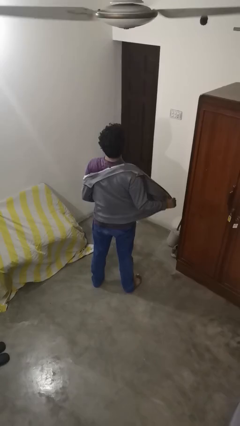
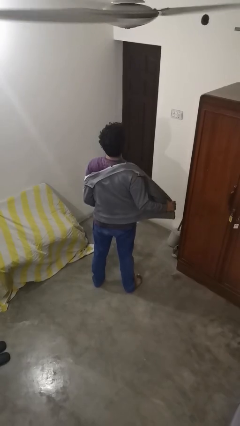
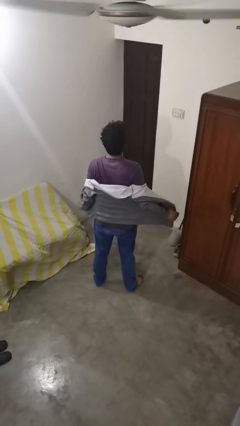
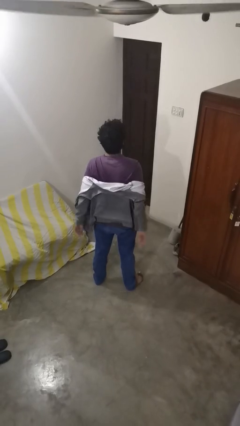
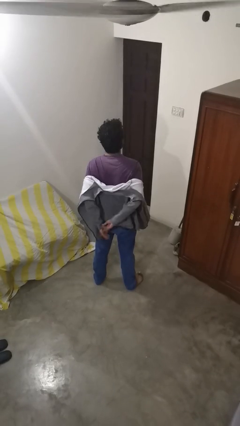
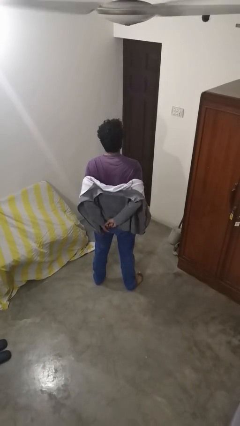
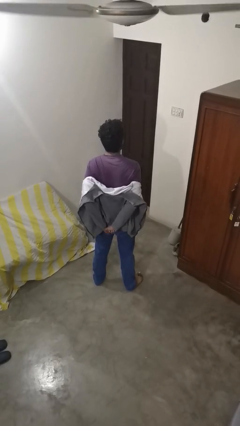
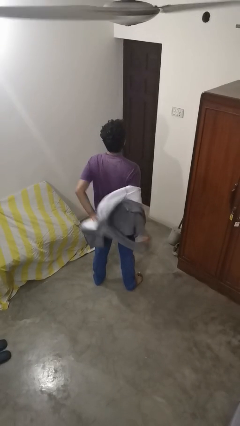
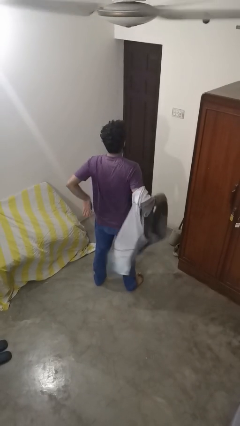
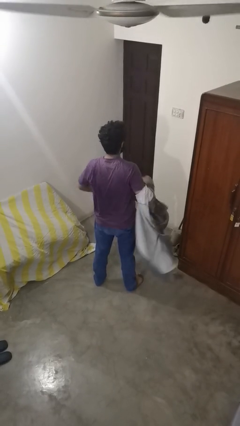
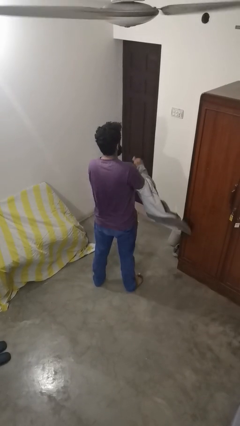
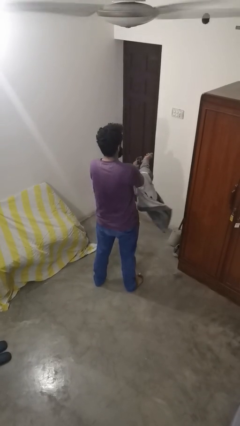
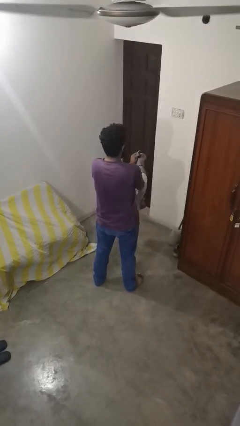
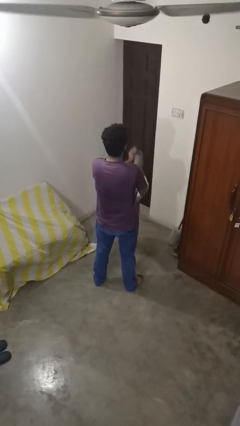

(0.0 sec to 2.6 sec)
person takes off jacket

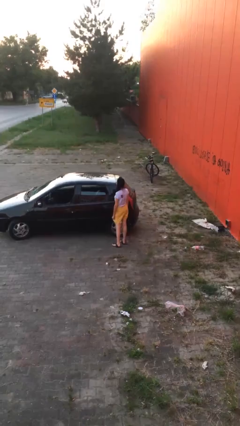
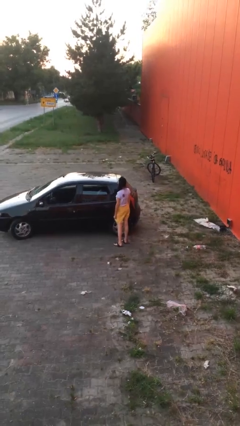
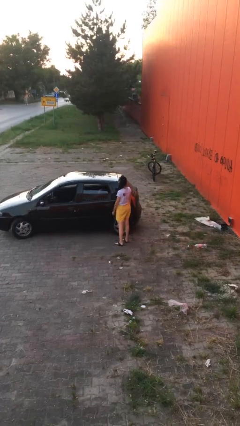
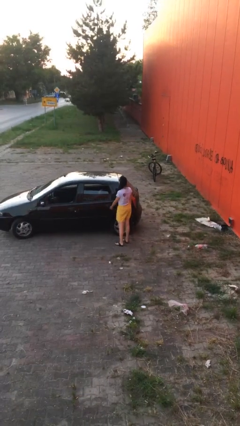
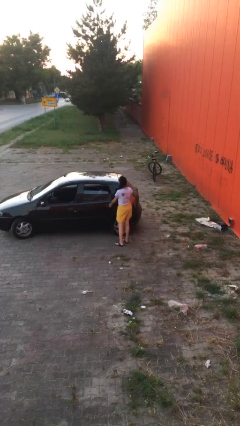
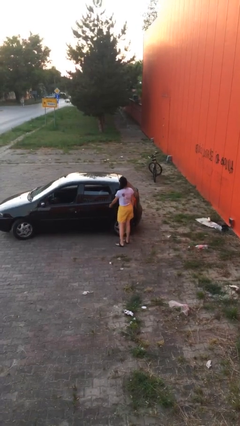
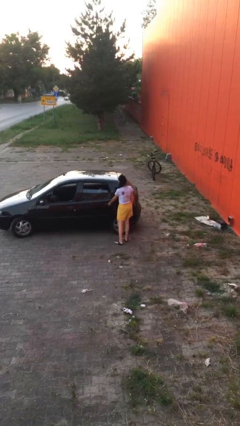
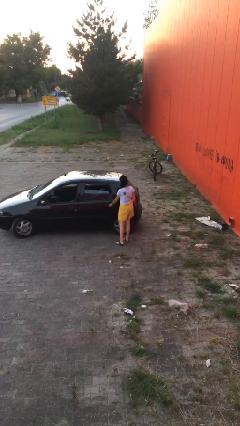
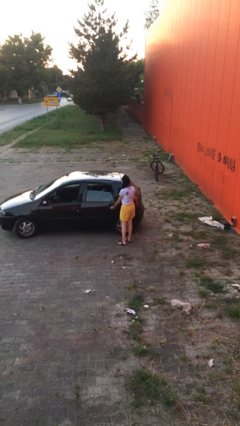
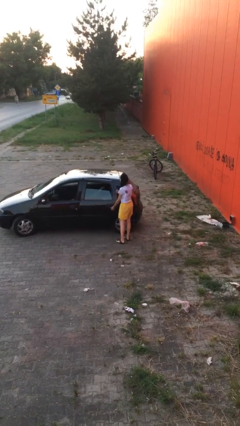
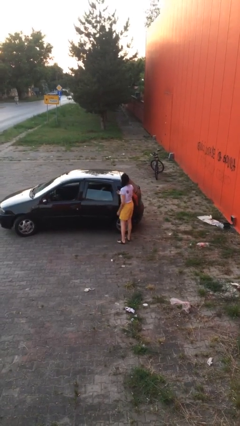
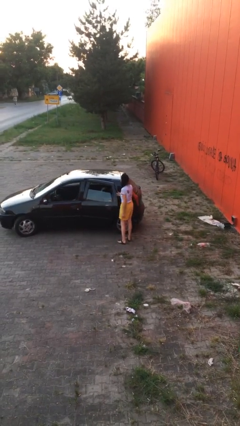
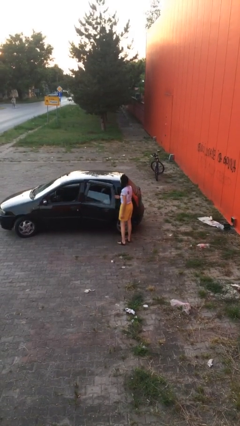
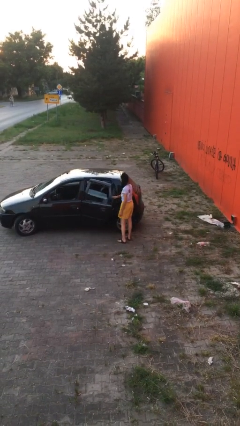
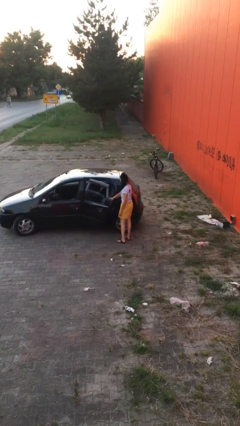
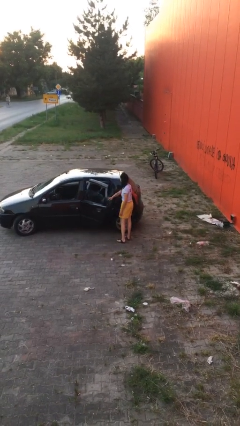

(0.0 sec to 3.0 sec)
person opens car door

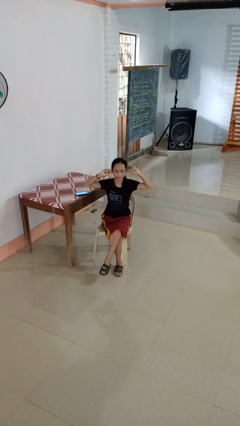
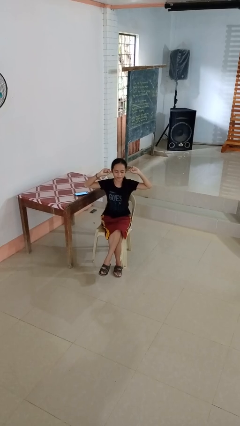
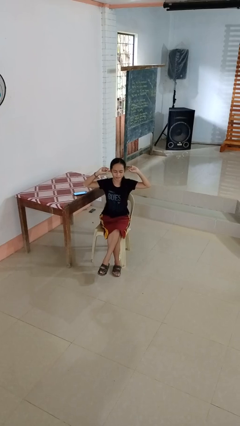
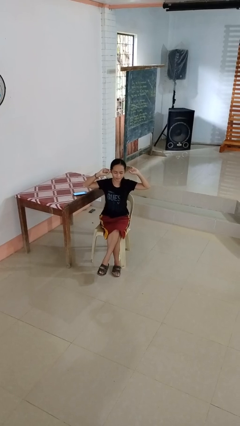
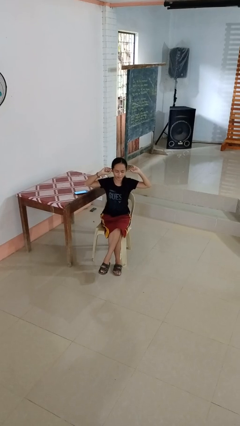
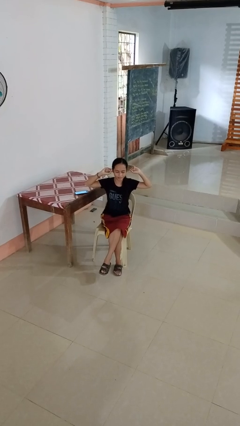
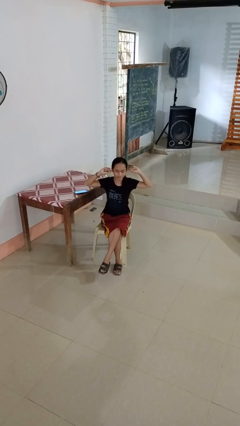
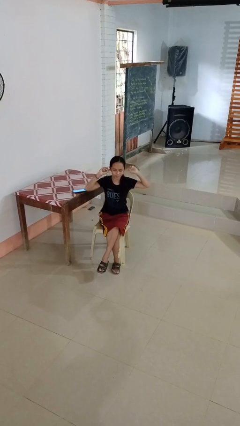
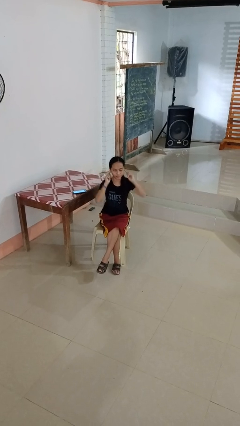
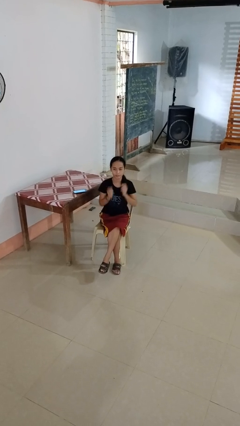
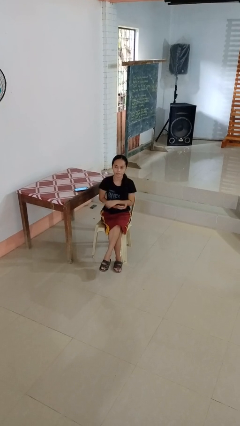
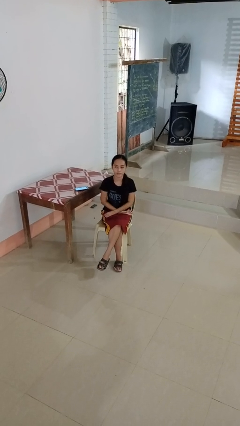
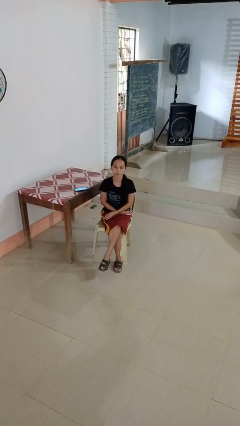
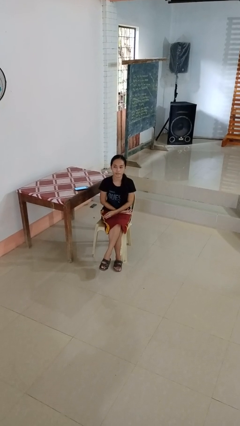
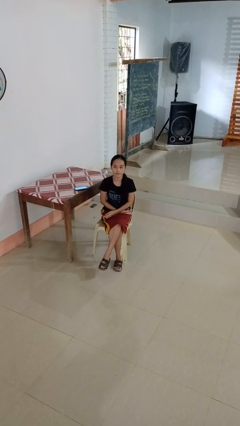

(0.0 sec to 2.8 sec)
person puts fingers in ear

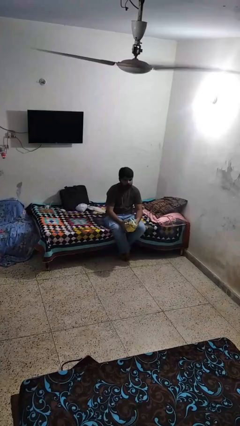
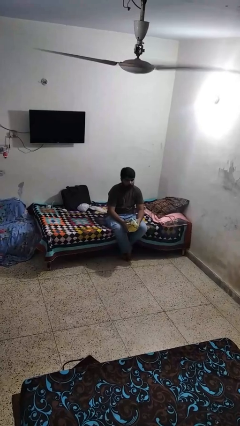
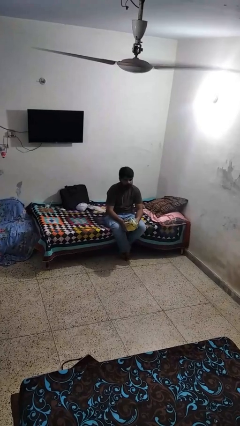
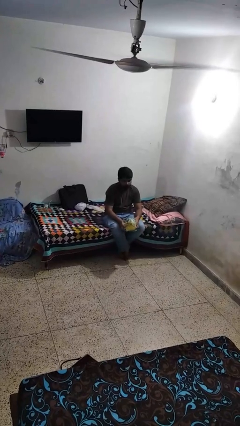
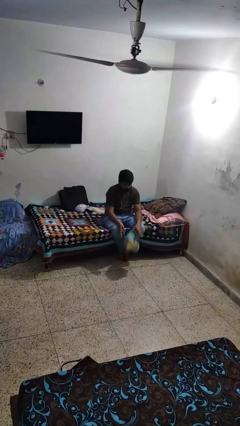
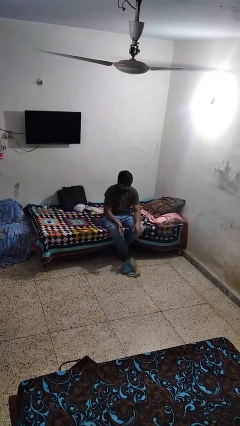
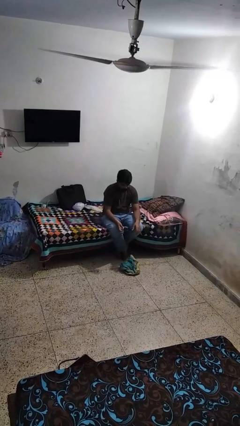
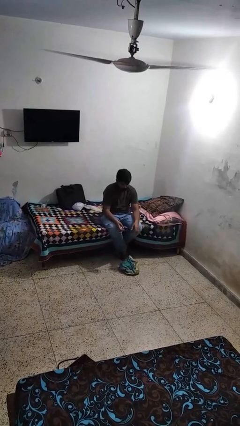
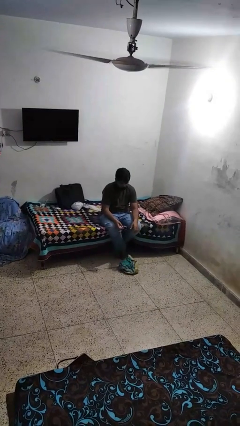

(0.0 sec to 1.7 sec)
person drops object

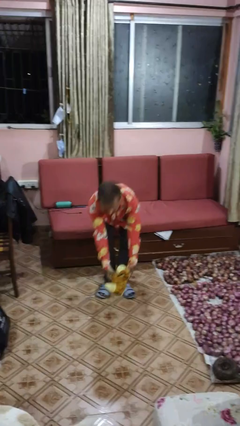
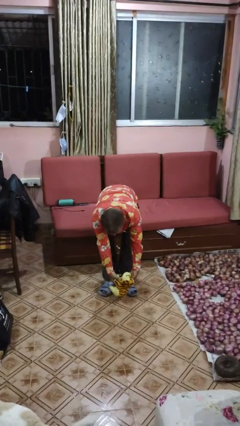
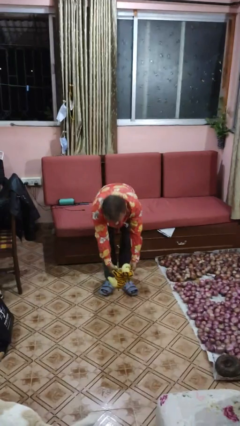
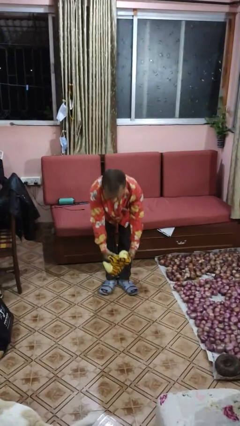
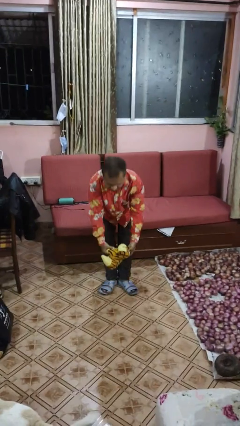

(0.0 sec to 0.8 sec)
person catches dropped object

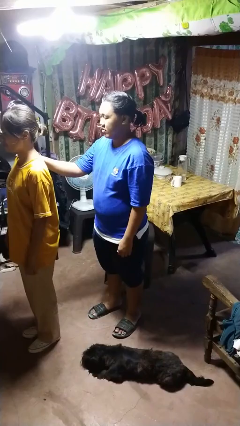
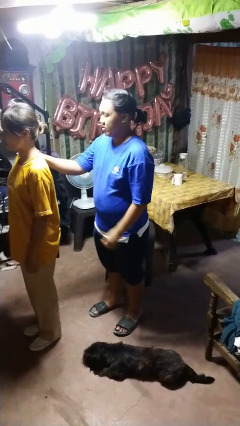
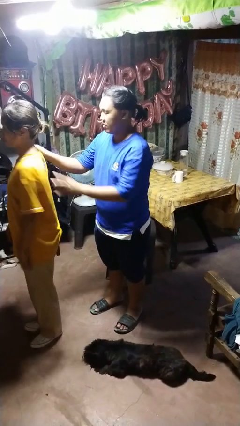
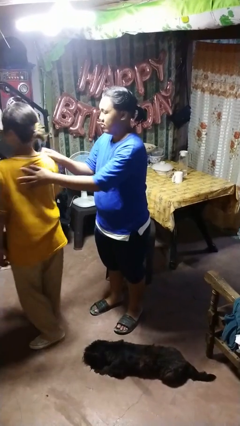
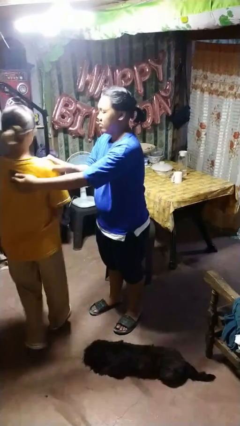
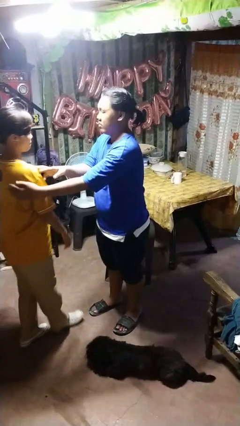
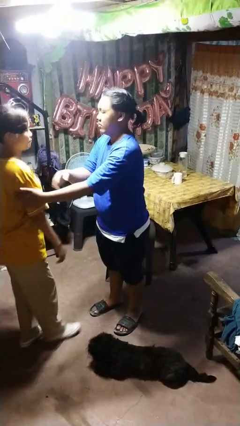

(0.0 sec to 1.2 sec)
person spins person around

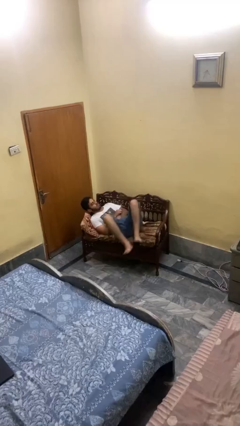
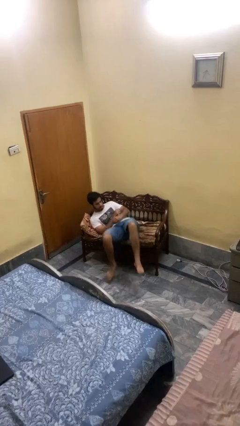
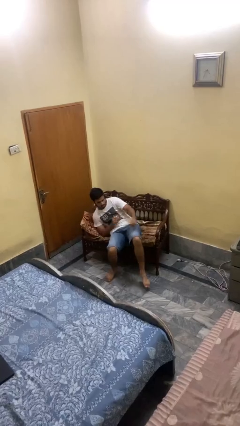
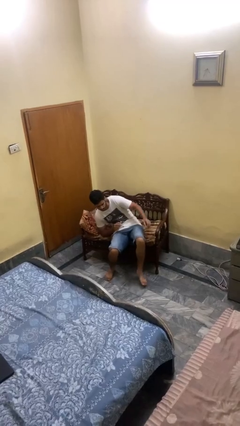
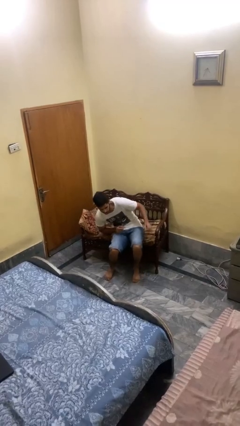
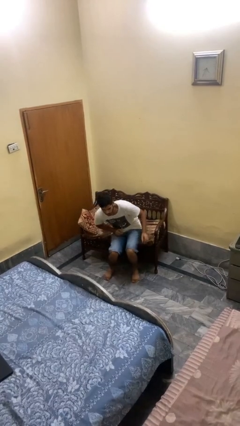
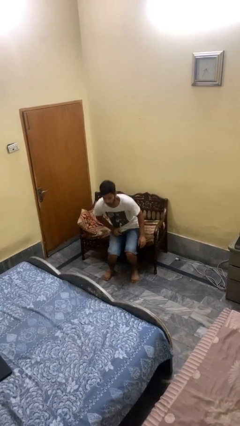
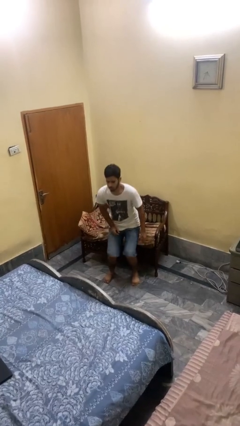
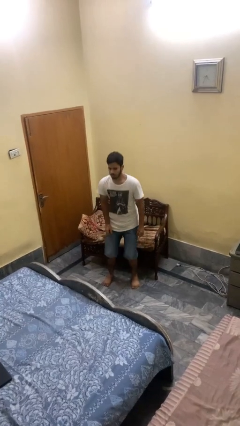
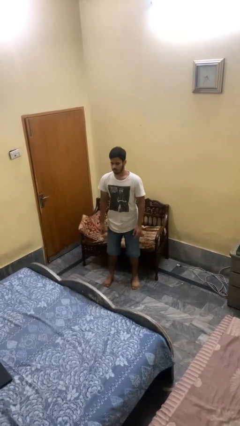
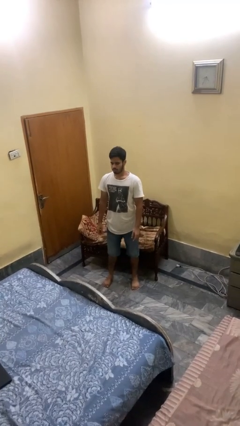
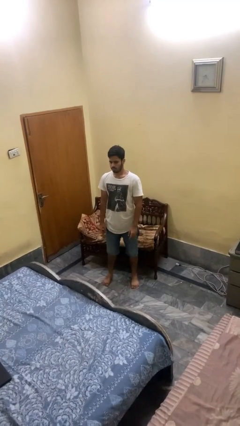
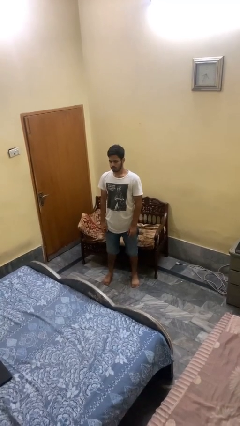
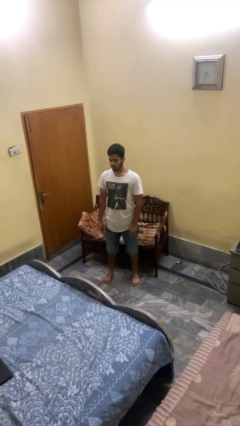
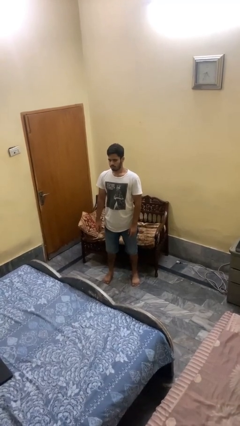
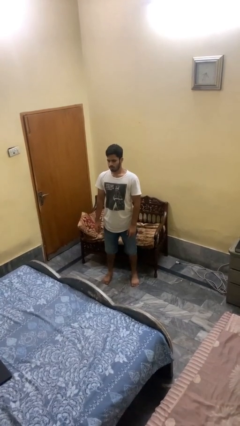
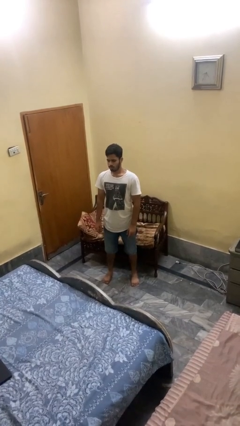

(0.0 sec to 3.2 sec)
person stands up

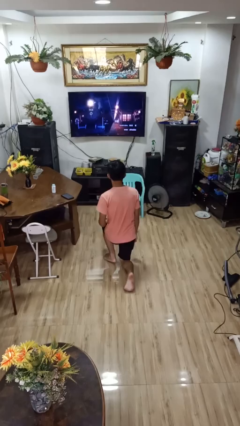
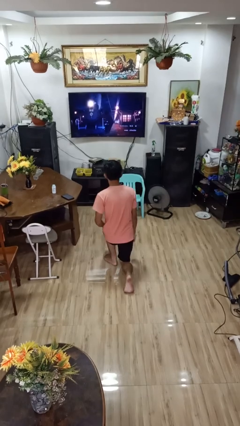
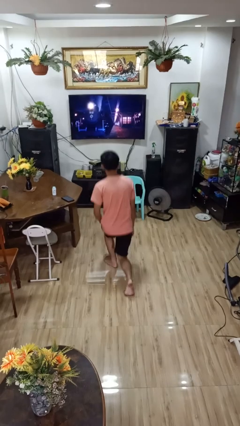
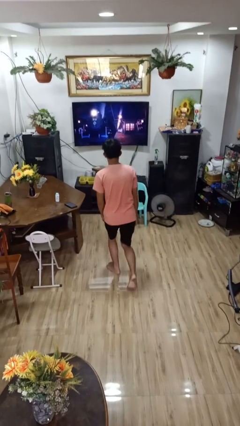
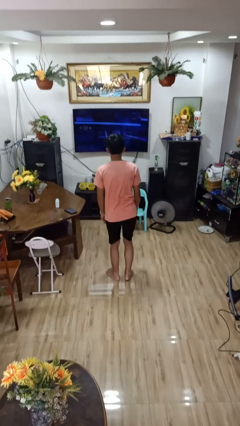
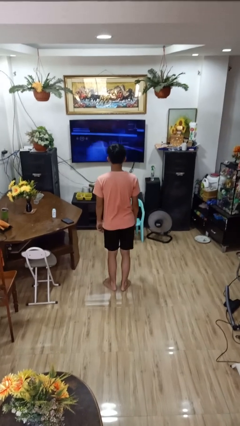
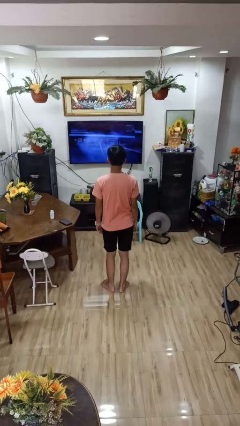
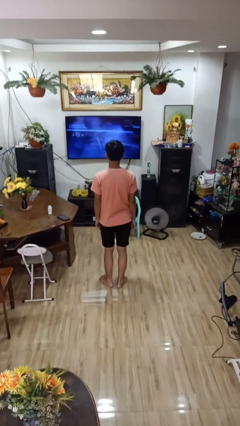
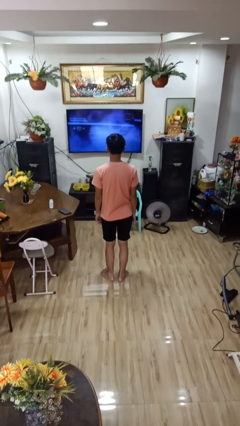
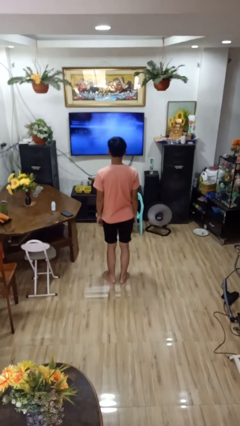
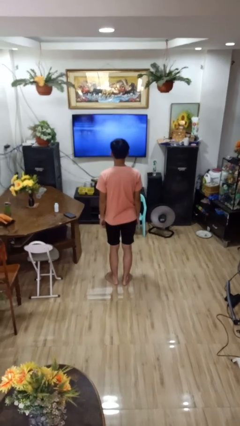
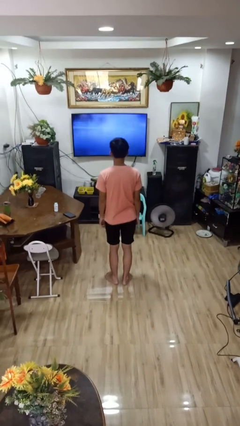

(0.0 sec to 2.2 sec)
person stands up from floor
